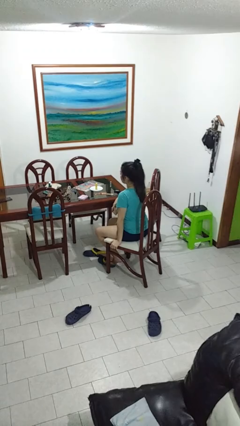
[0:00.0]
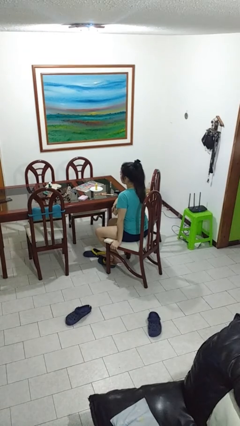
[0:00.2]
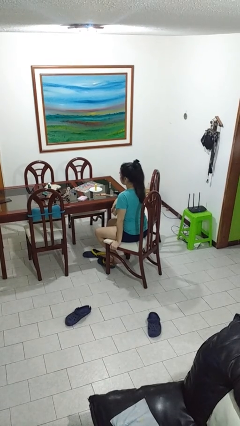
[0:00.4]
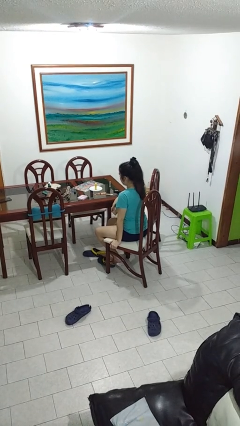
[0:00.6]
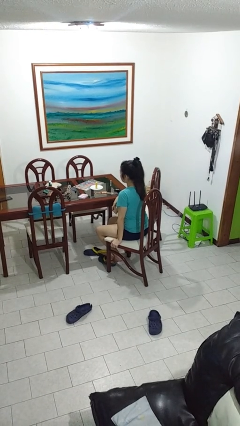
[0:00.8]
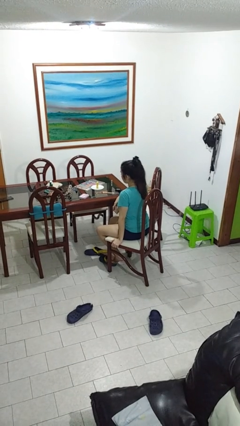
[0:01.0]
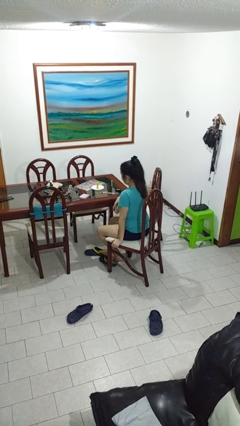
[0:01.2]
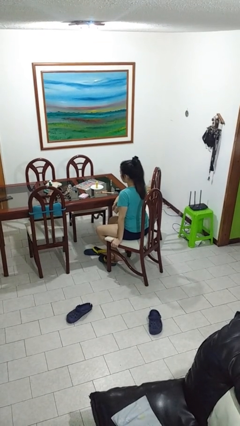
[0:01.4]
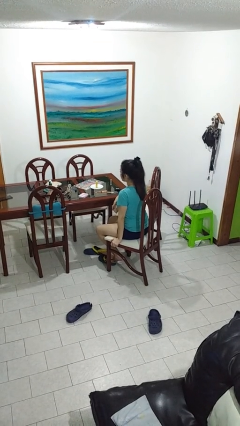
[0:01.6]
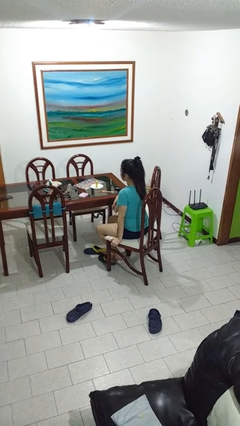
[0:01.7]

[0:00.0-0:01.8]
person nods head

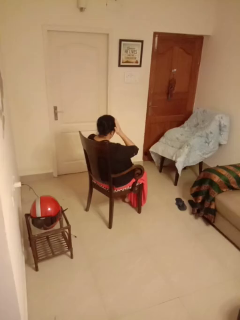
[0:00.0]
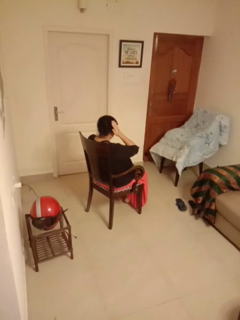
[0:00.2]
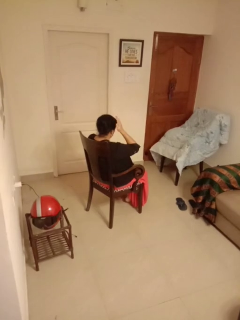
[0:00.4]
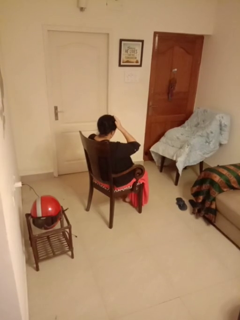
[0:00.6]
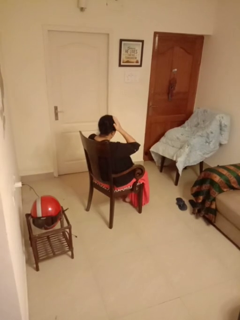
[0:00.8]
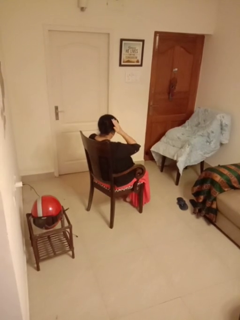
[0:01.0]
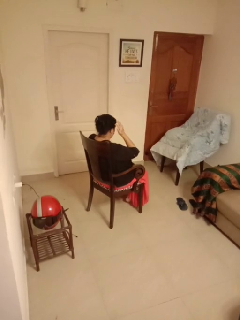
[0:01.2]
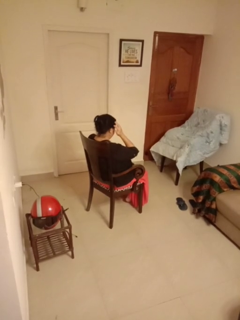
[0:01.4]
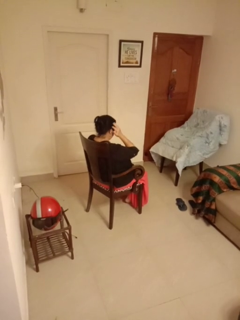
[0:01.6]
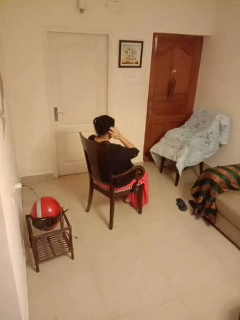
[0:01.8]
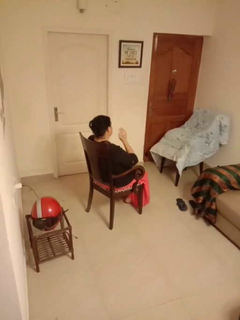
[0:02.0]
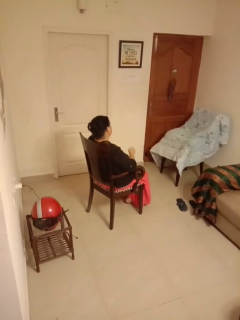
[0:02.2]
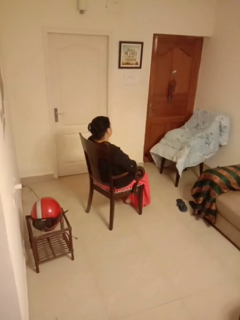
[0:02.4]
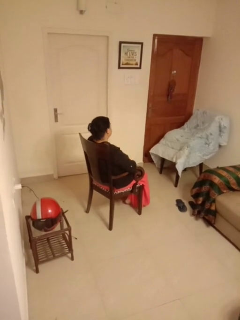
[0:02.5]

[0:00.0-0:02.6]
person strokes hair

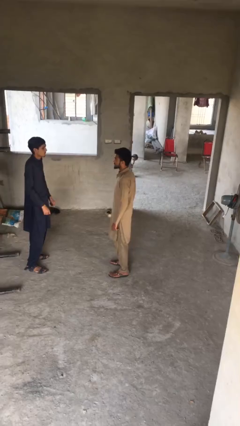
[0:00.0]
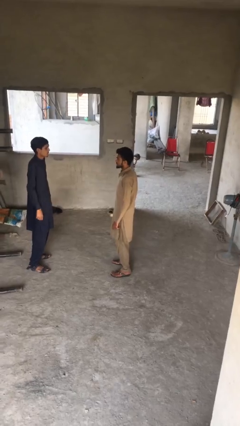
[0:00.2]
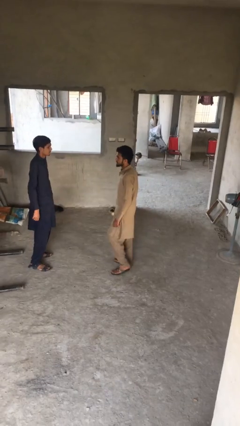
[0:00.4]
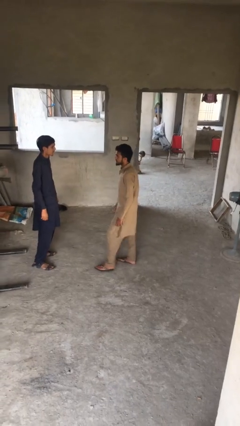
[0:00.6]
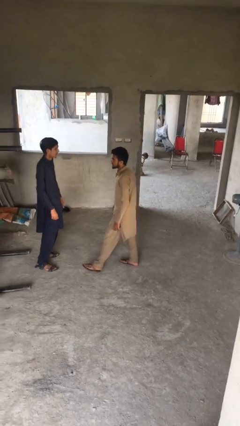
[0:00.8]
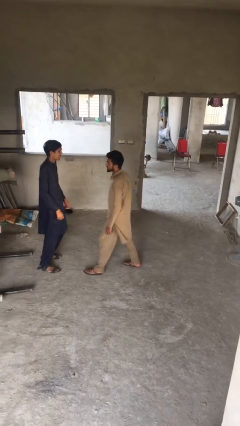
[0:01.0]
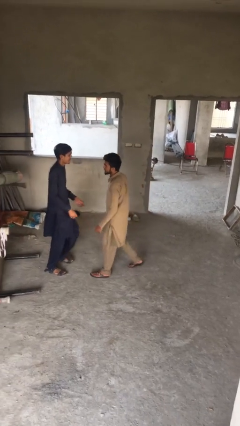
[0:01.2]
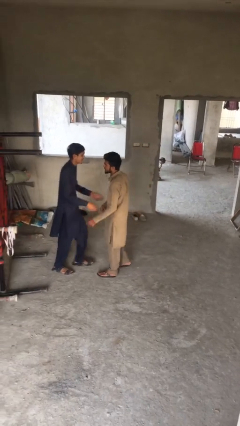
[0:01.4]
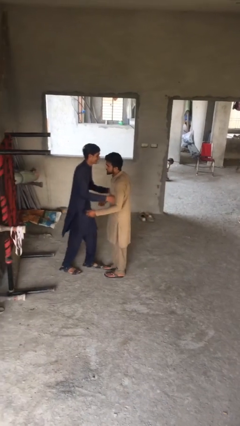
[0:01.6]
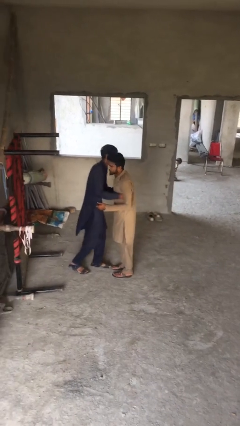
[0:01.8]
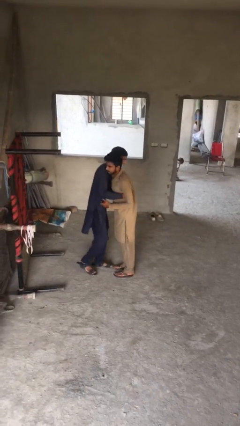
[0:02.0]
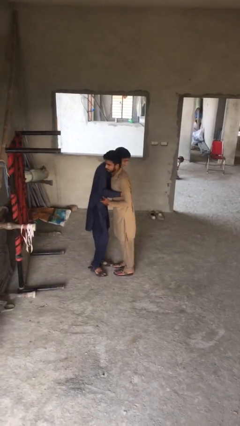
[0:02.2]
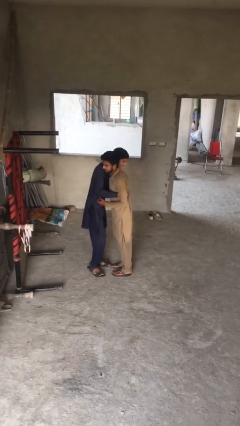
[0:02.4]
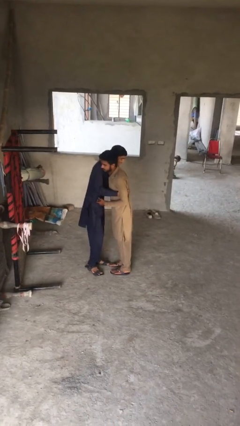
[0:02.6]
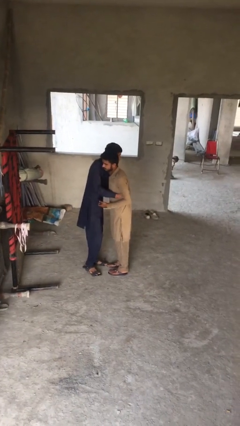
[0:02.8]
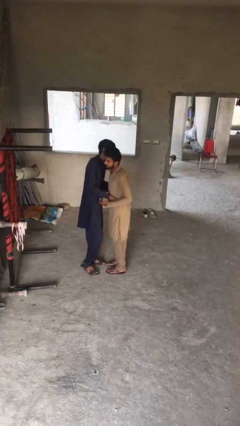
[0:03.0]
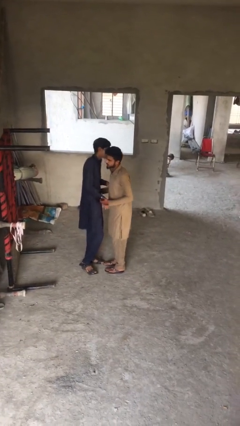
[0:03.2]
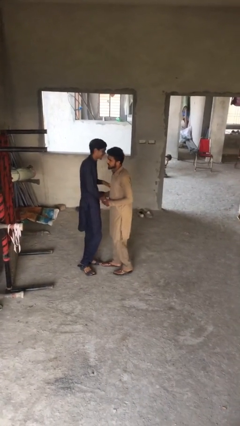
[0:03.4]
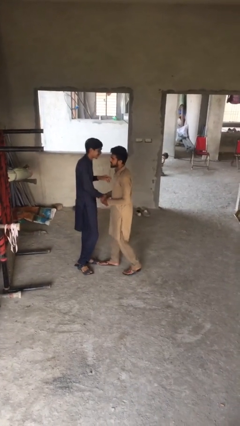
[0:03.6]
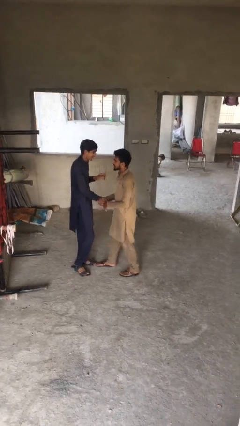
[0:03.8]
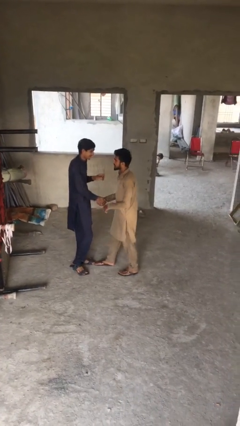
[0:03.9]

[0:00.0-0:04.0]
person embraces person

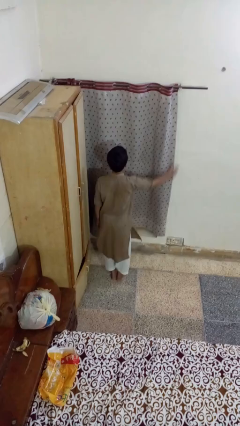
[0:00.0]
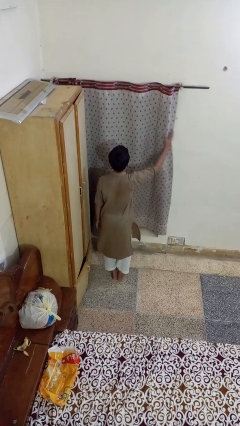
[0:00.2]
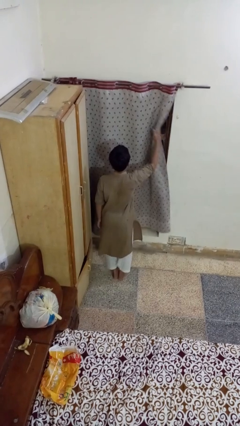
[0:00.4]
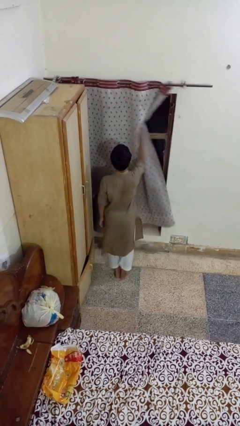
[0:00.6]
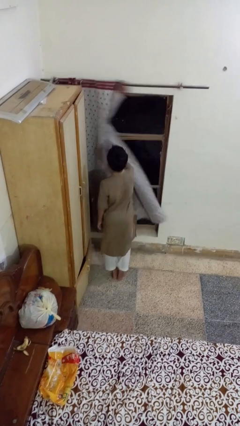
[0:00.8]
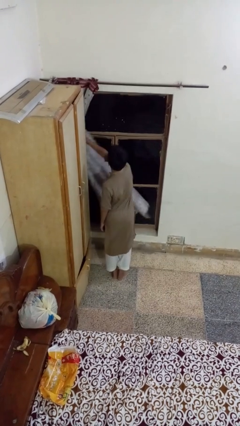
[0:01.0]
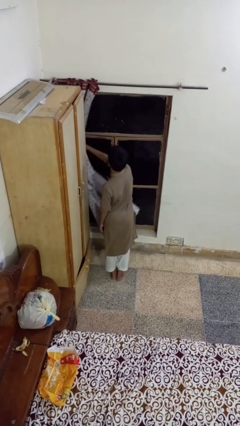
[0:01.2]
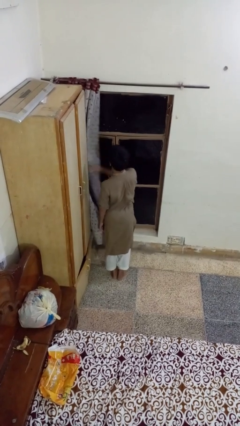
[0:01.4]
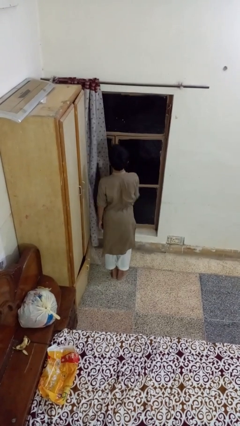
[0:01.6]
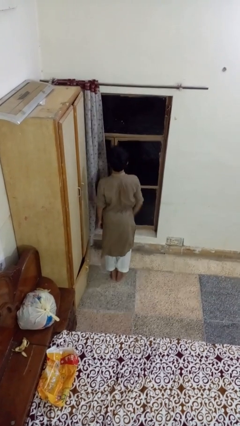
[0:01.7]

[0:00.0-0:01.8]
person opens curtains

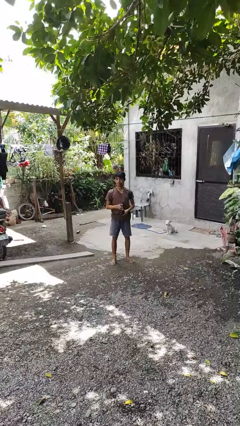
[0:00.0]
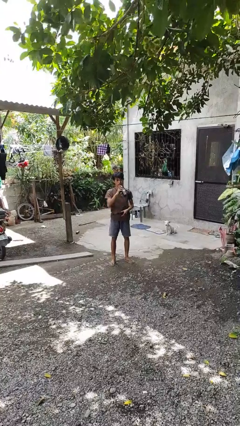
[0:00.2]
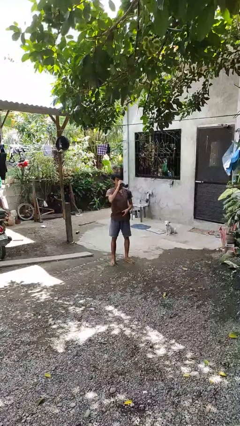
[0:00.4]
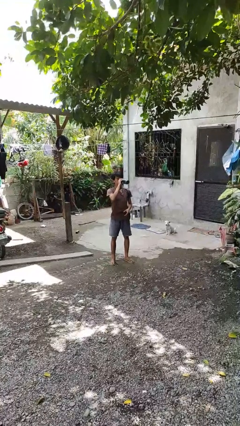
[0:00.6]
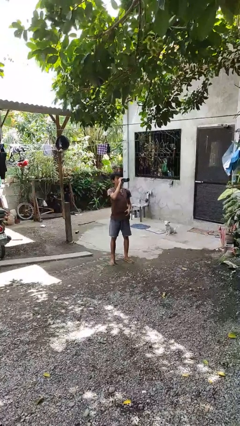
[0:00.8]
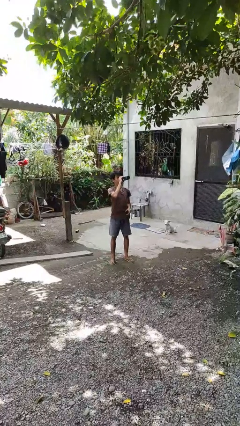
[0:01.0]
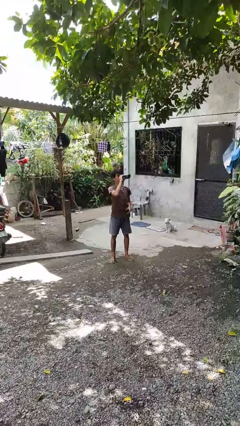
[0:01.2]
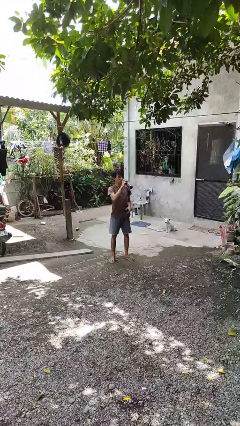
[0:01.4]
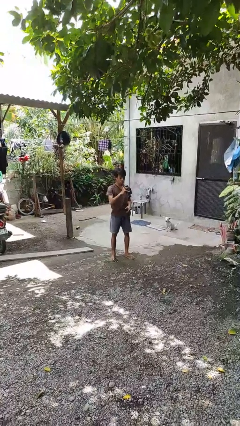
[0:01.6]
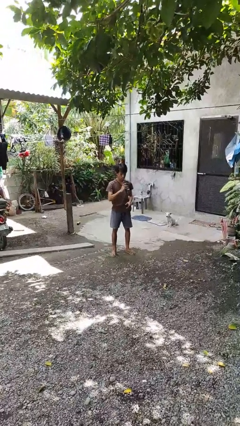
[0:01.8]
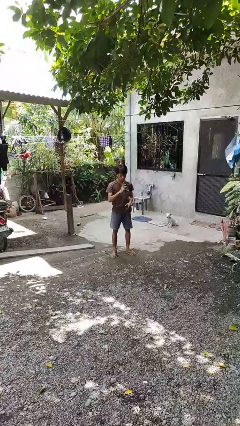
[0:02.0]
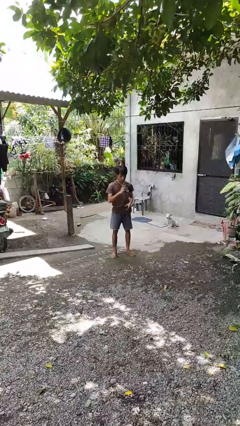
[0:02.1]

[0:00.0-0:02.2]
person drinks from bottle

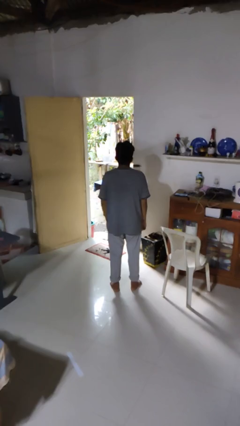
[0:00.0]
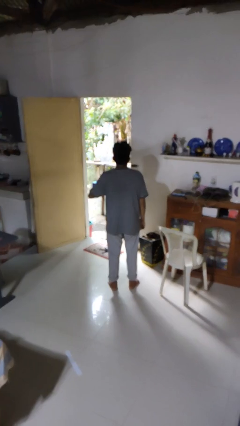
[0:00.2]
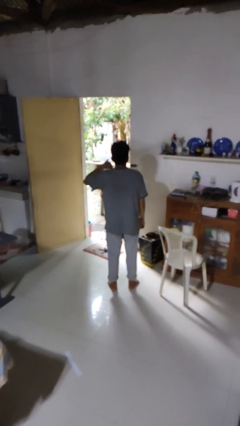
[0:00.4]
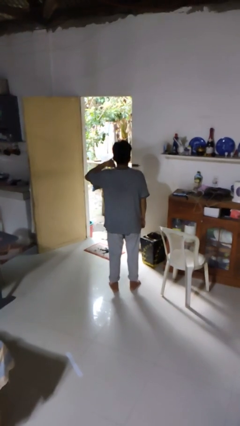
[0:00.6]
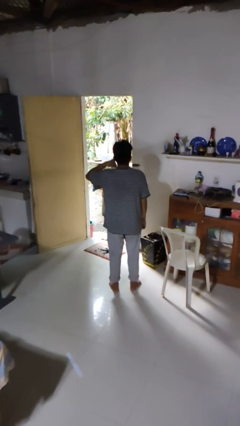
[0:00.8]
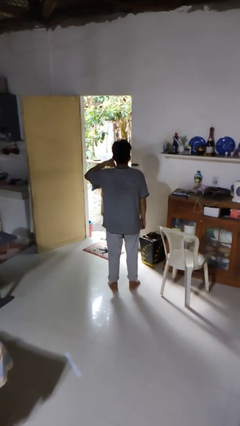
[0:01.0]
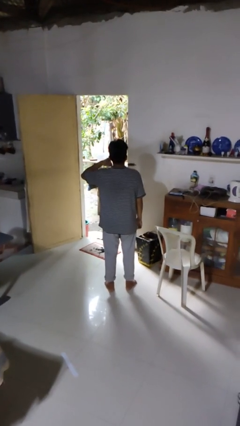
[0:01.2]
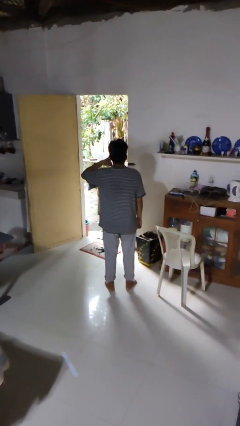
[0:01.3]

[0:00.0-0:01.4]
person gestures call me

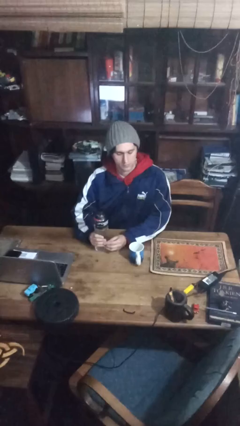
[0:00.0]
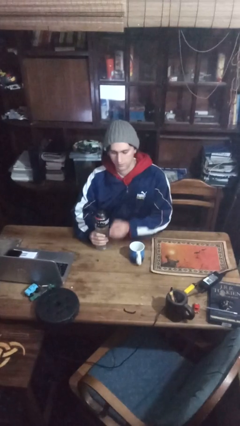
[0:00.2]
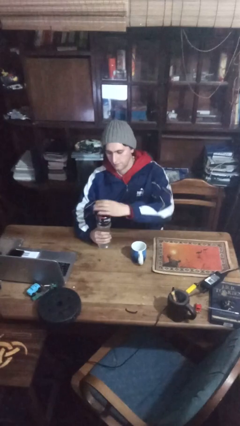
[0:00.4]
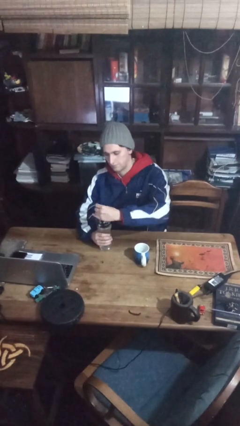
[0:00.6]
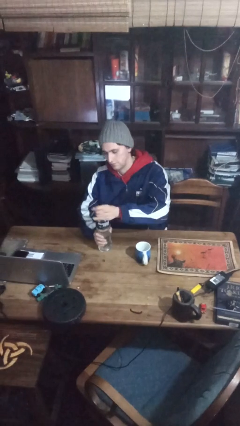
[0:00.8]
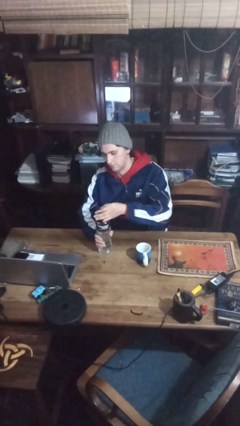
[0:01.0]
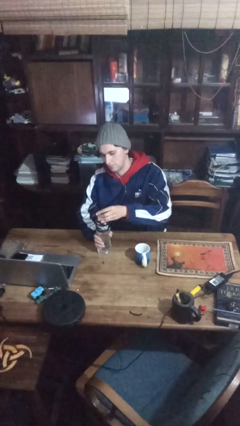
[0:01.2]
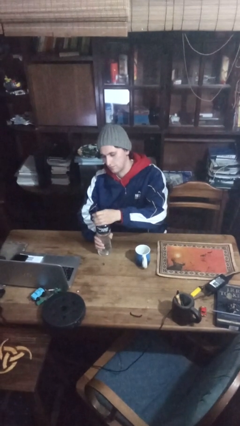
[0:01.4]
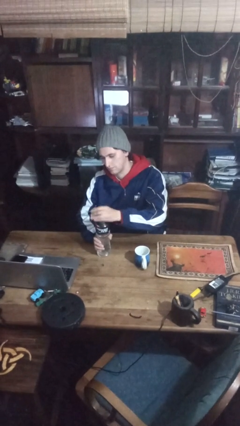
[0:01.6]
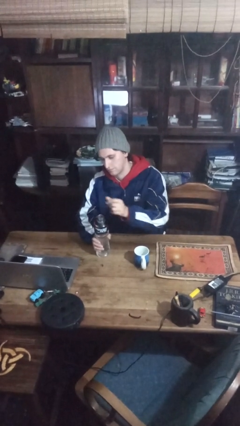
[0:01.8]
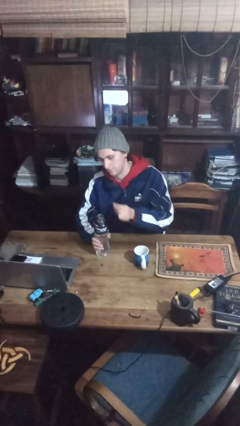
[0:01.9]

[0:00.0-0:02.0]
person unscrews lid from bottle

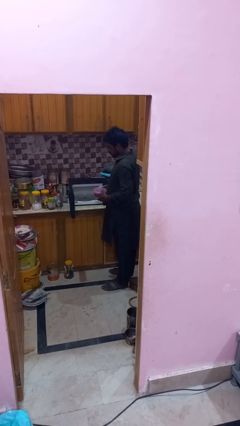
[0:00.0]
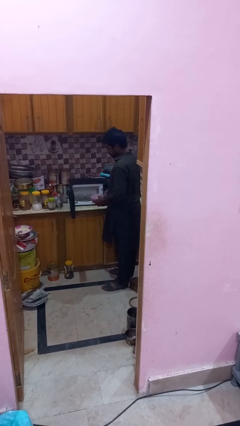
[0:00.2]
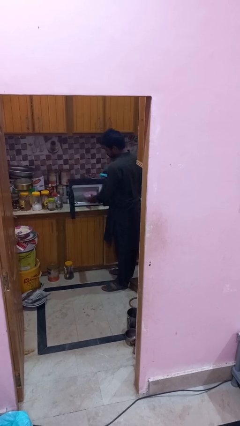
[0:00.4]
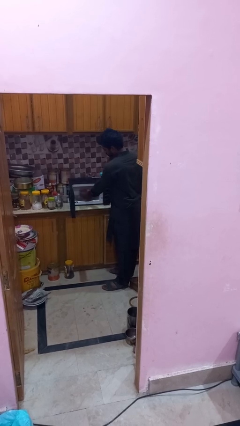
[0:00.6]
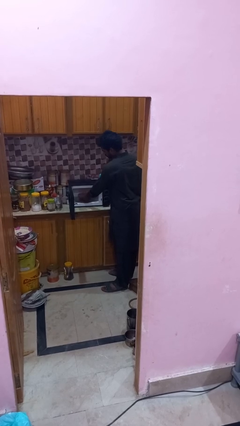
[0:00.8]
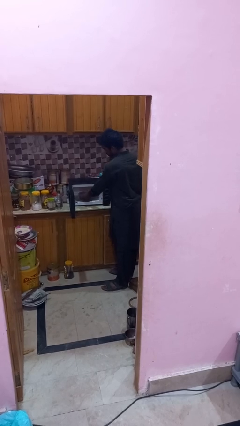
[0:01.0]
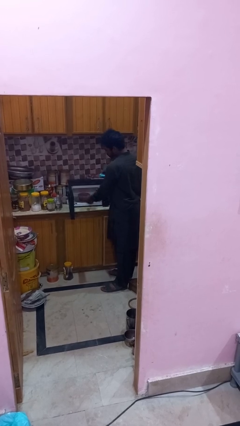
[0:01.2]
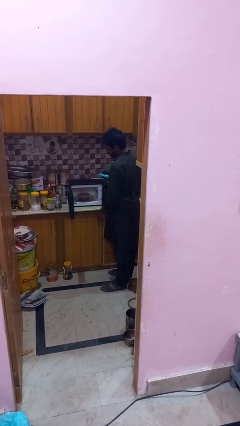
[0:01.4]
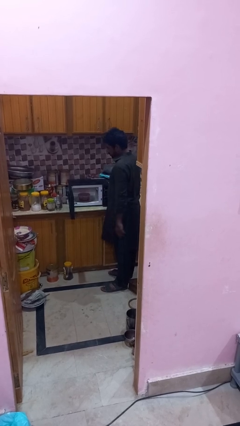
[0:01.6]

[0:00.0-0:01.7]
person puts object into microwave
